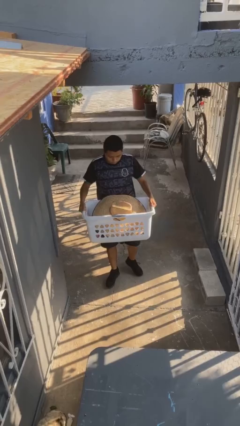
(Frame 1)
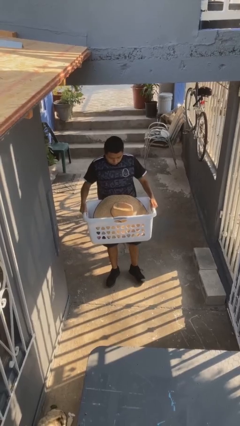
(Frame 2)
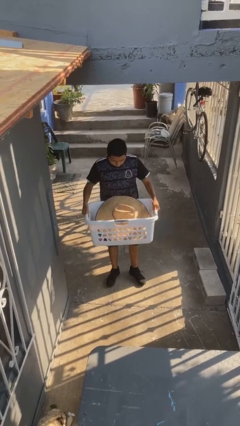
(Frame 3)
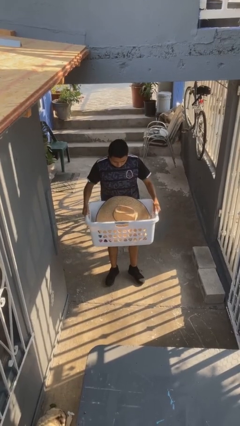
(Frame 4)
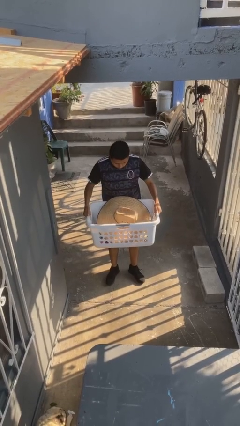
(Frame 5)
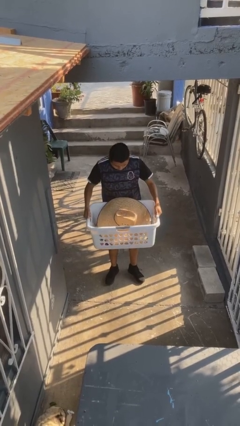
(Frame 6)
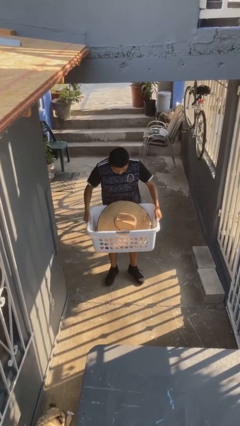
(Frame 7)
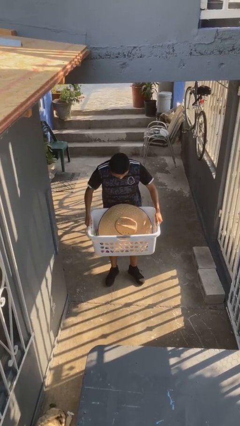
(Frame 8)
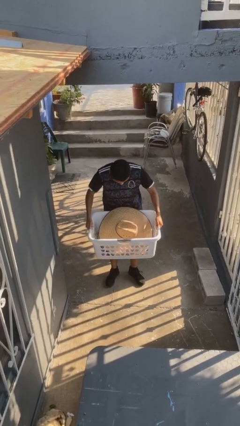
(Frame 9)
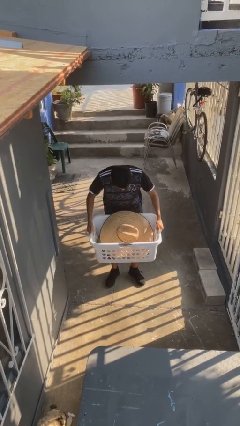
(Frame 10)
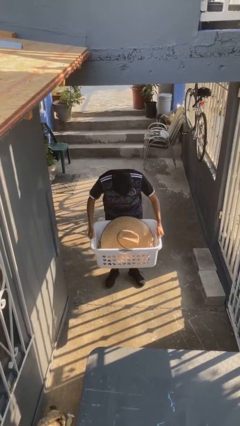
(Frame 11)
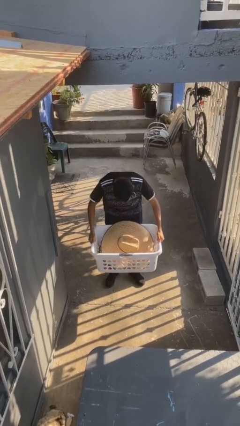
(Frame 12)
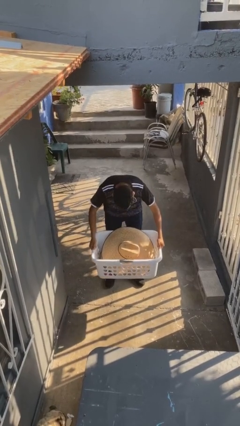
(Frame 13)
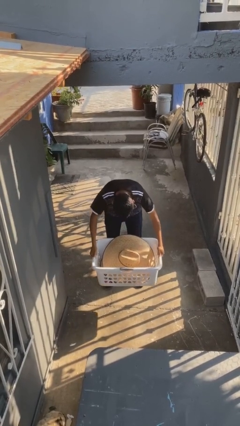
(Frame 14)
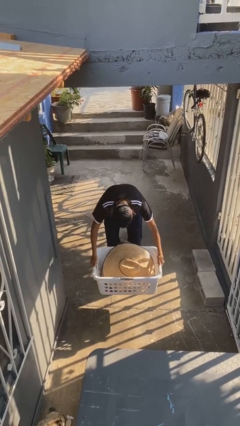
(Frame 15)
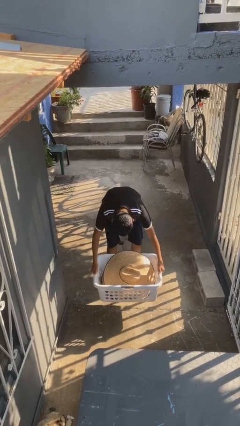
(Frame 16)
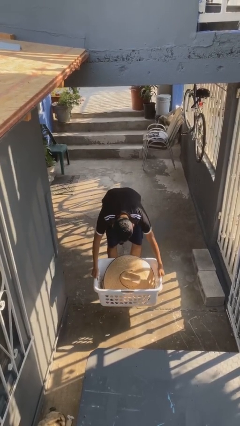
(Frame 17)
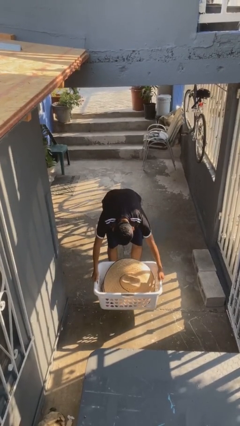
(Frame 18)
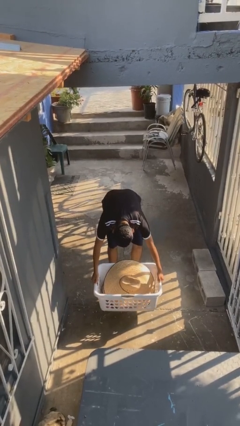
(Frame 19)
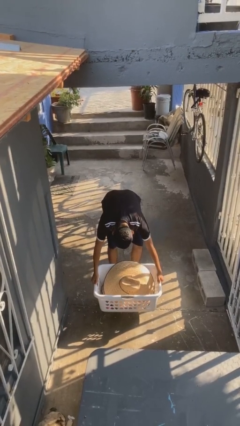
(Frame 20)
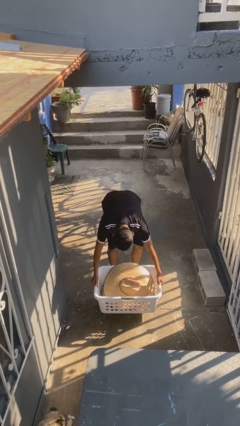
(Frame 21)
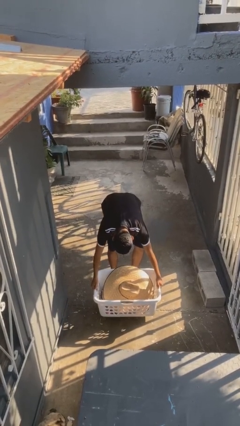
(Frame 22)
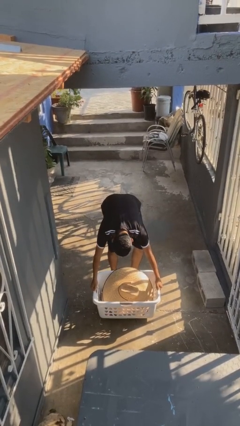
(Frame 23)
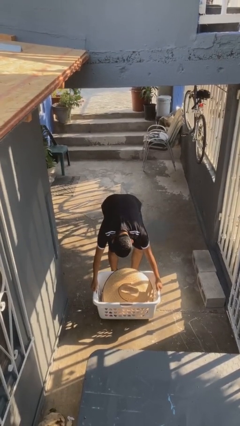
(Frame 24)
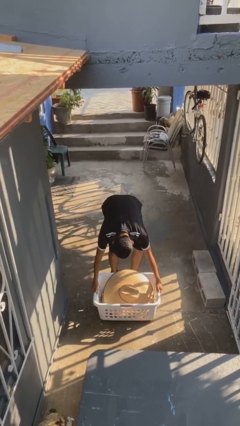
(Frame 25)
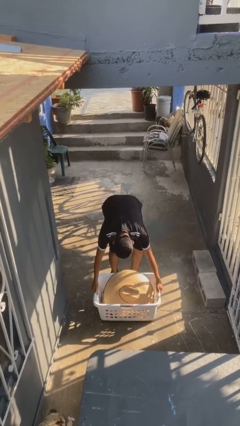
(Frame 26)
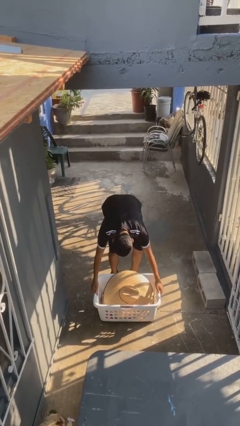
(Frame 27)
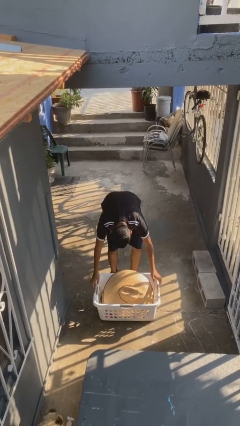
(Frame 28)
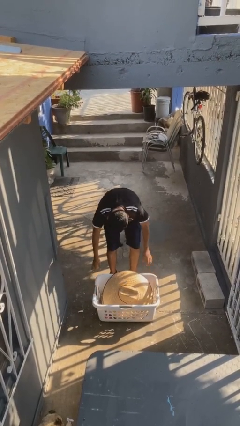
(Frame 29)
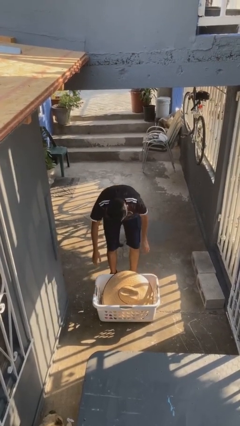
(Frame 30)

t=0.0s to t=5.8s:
person puts down object on floor

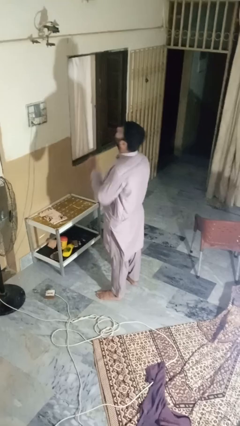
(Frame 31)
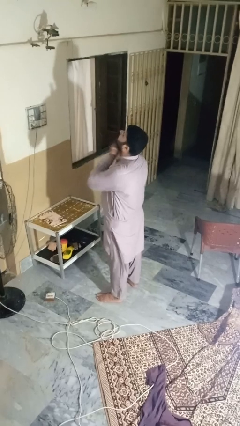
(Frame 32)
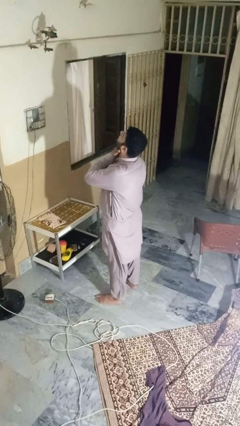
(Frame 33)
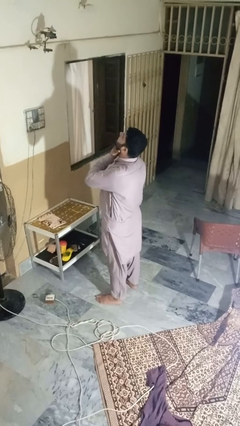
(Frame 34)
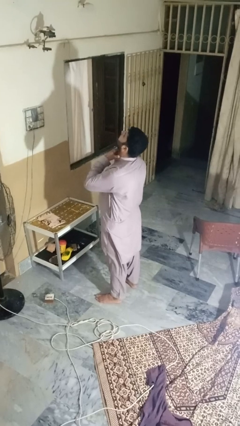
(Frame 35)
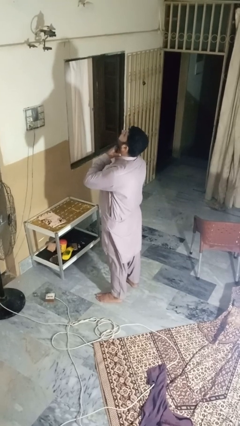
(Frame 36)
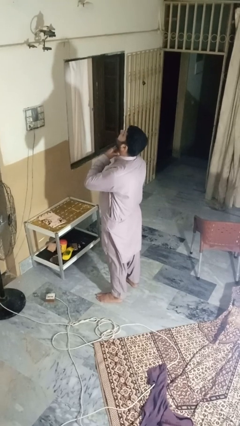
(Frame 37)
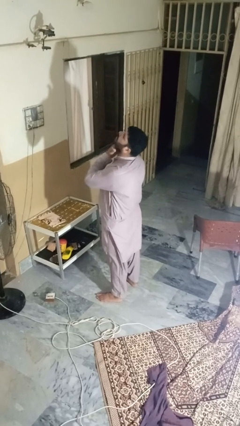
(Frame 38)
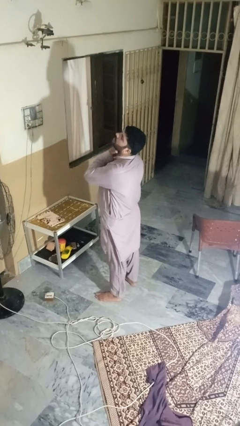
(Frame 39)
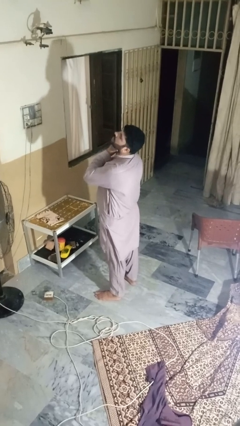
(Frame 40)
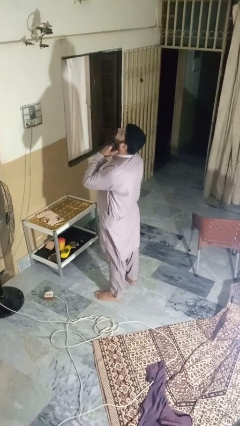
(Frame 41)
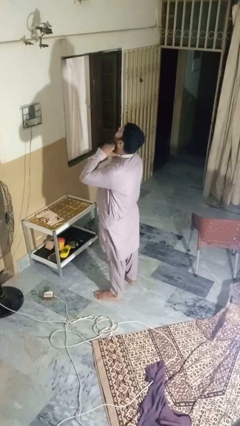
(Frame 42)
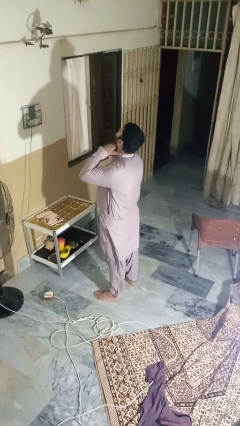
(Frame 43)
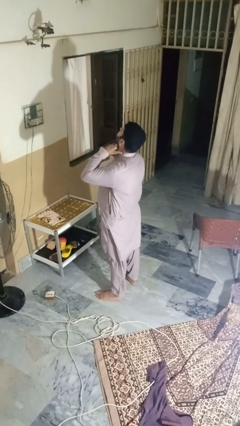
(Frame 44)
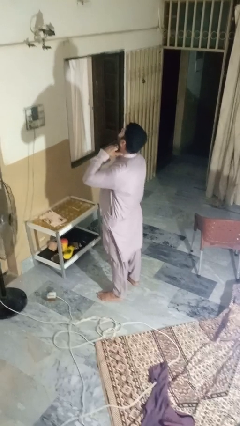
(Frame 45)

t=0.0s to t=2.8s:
person rubs neck

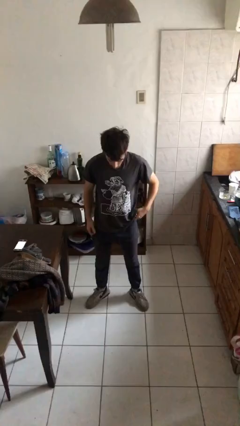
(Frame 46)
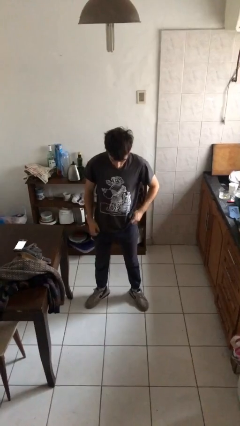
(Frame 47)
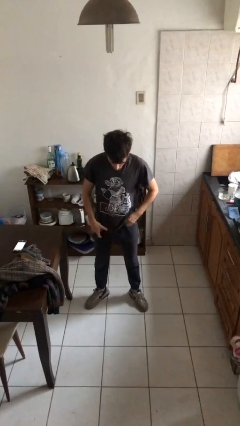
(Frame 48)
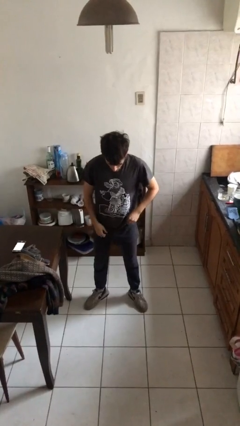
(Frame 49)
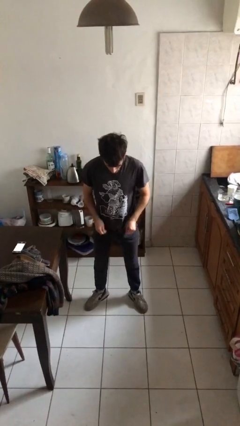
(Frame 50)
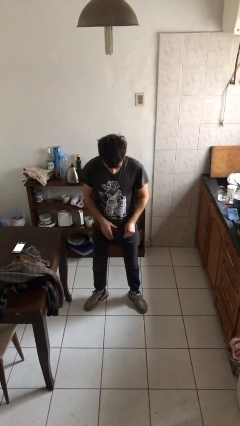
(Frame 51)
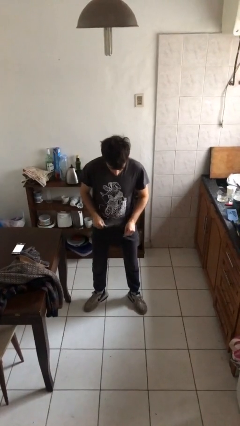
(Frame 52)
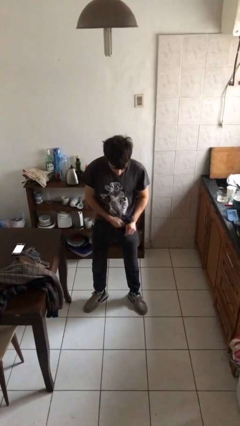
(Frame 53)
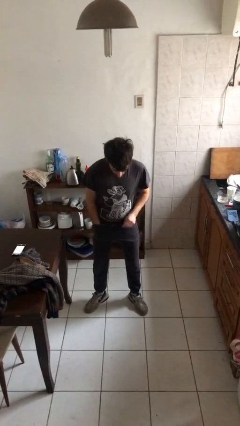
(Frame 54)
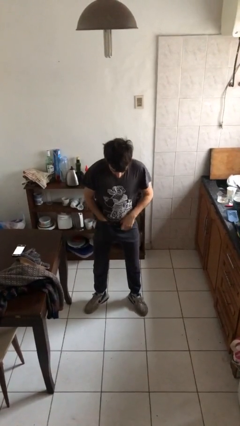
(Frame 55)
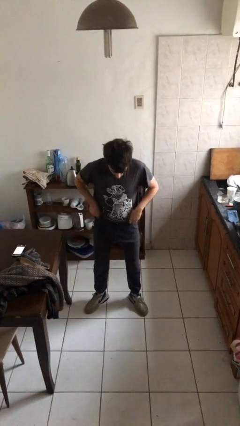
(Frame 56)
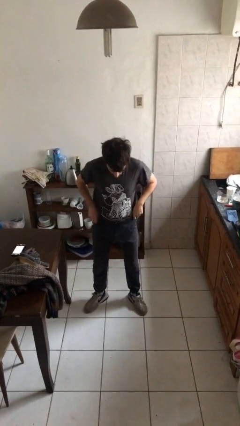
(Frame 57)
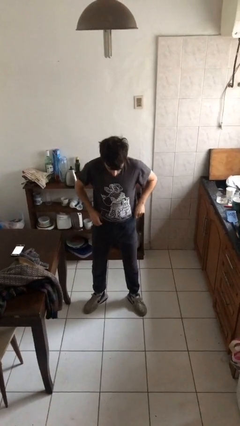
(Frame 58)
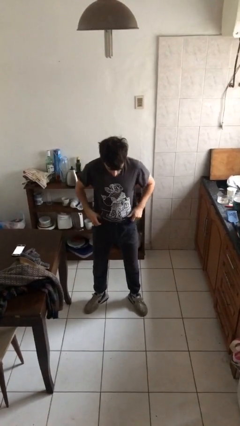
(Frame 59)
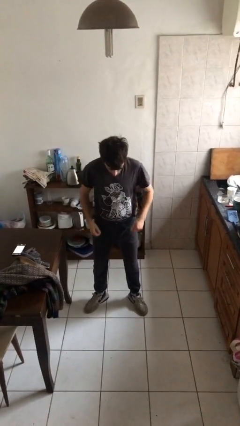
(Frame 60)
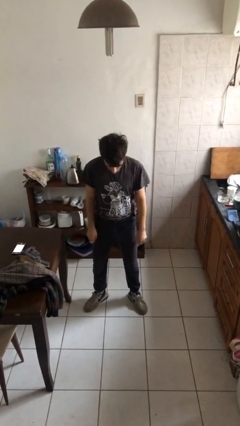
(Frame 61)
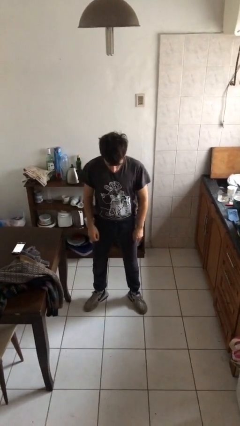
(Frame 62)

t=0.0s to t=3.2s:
person tucks in shirt

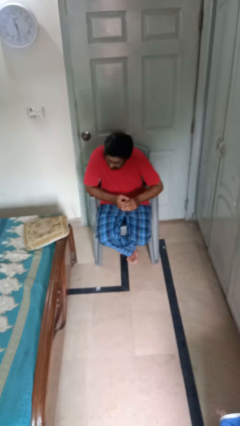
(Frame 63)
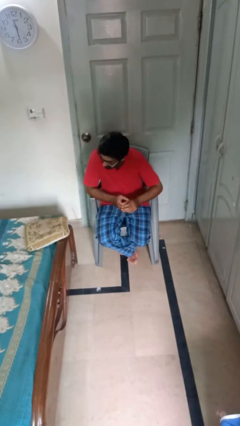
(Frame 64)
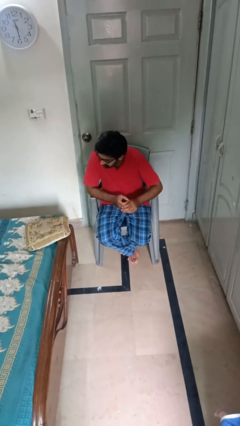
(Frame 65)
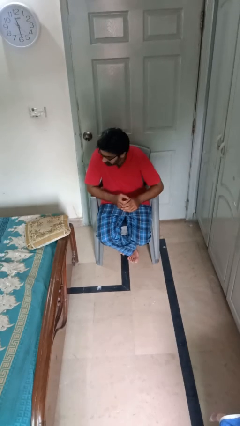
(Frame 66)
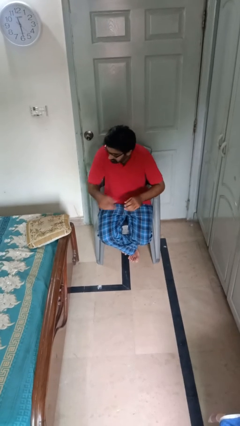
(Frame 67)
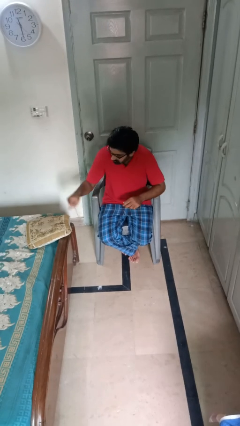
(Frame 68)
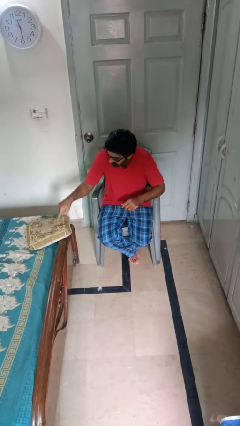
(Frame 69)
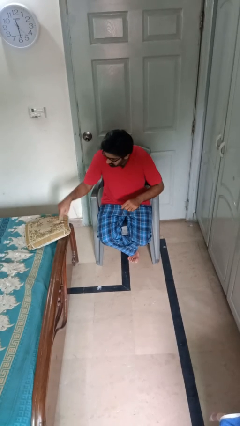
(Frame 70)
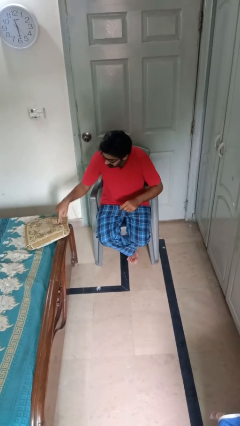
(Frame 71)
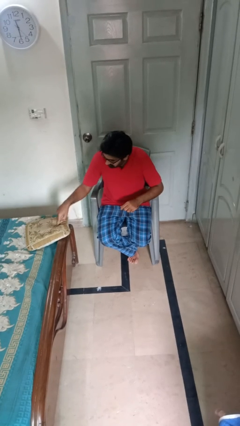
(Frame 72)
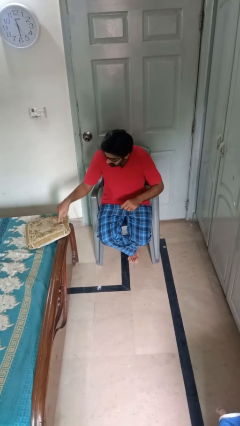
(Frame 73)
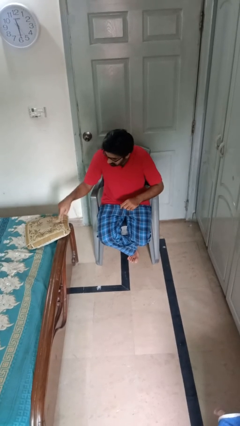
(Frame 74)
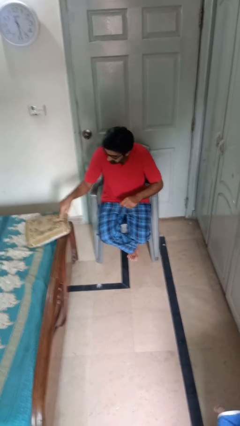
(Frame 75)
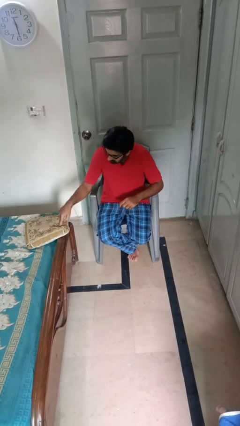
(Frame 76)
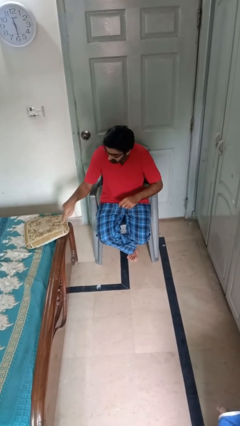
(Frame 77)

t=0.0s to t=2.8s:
person taps object with finger

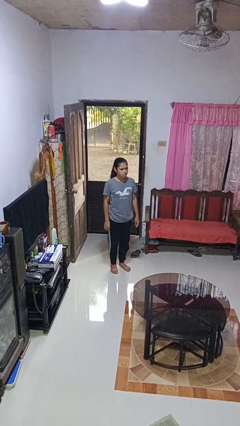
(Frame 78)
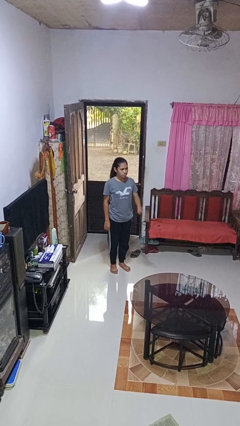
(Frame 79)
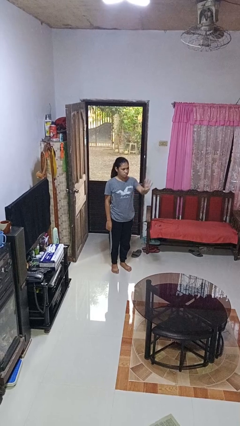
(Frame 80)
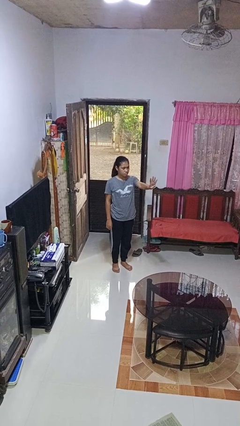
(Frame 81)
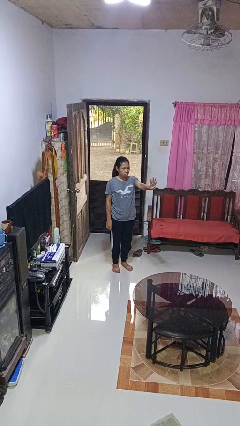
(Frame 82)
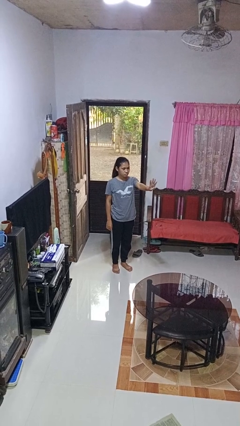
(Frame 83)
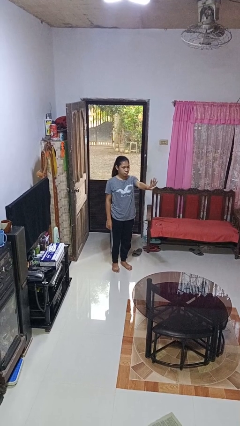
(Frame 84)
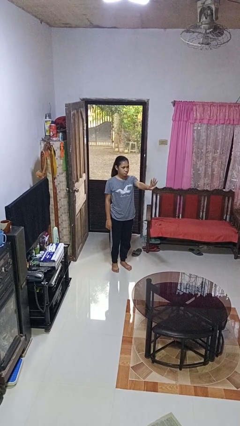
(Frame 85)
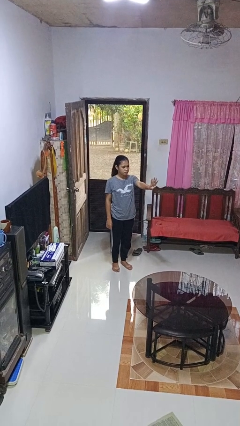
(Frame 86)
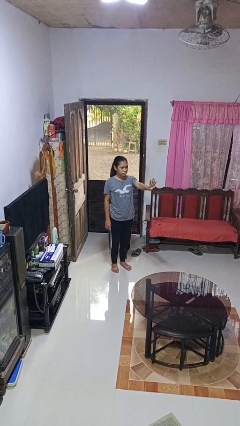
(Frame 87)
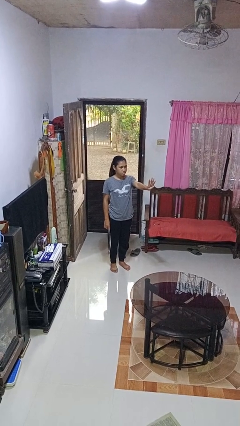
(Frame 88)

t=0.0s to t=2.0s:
person gestures number four

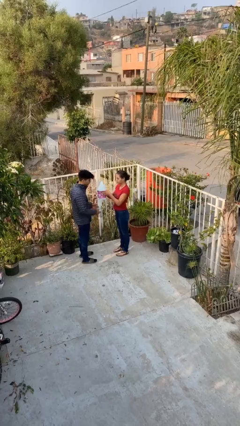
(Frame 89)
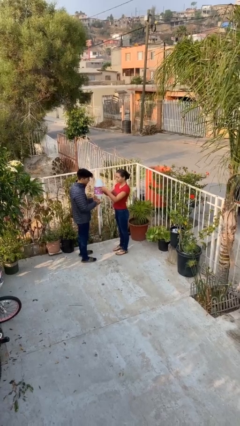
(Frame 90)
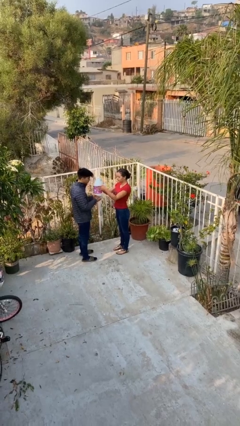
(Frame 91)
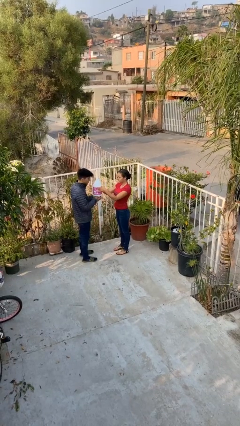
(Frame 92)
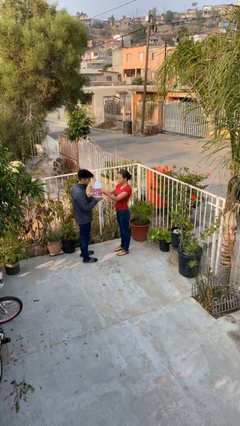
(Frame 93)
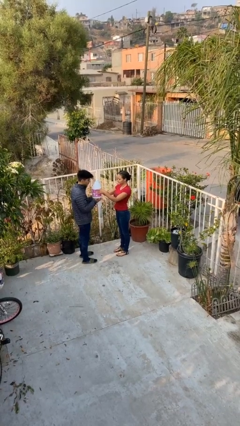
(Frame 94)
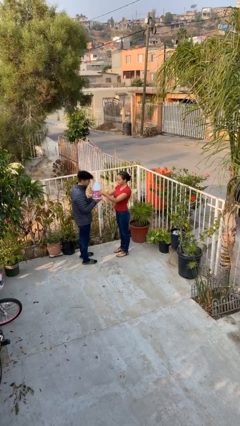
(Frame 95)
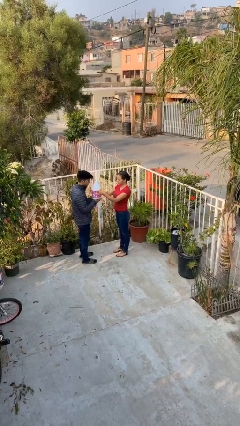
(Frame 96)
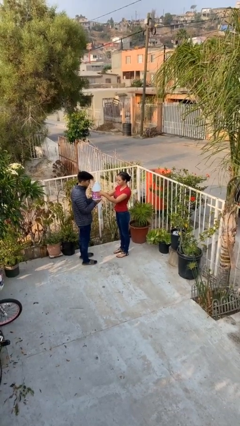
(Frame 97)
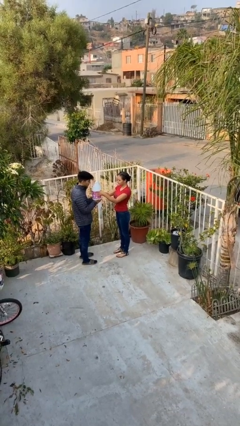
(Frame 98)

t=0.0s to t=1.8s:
person transfers object to person
